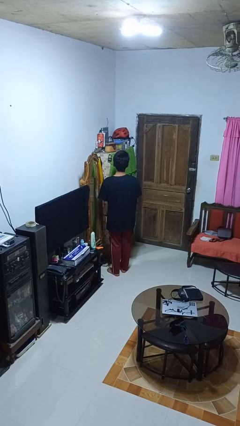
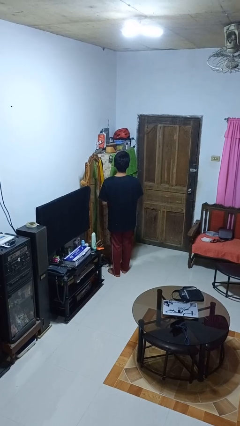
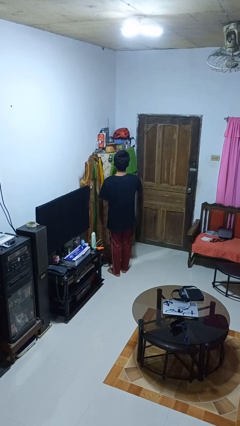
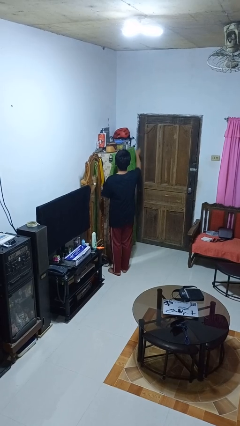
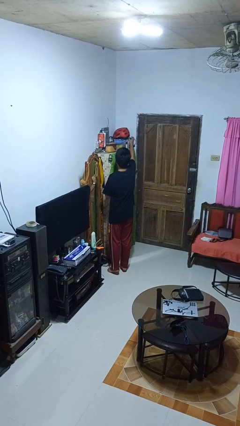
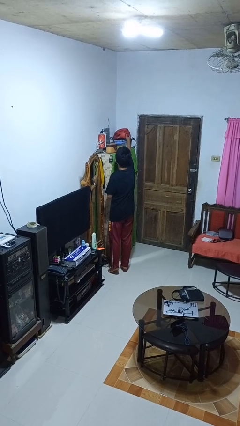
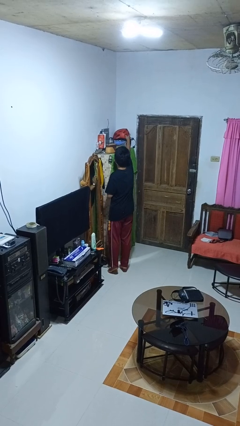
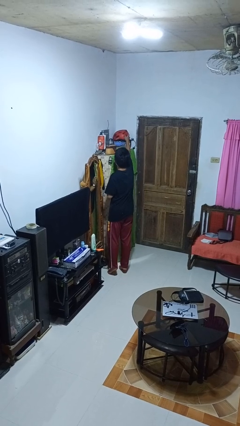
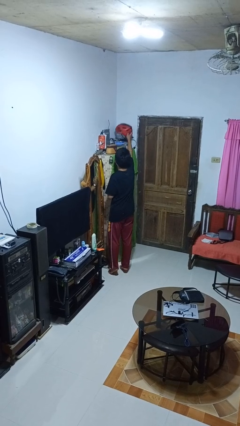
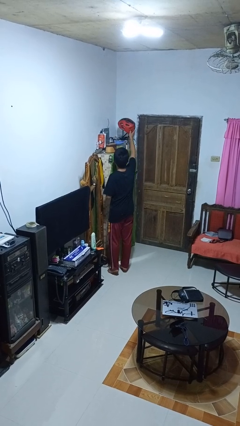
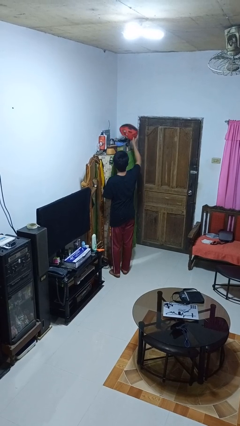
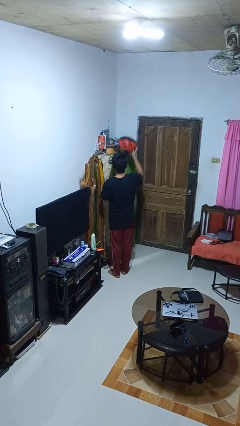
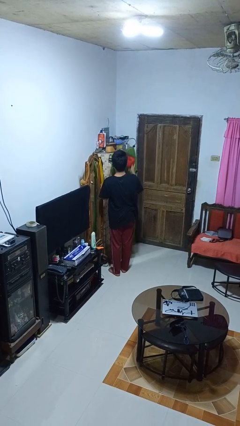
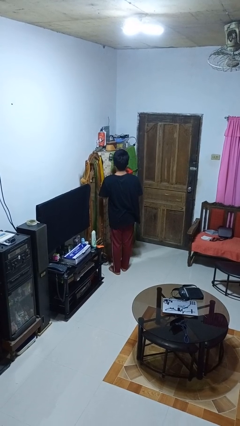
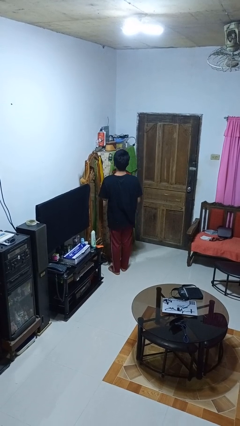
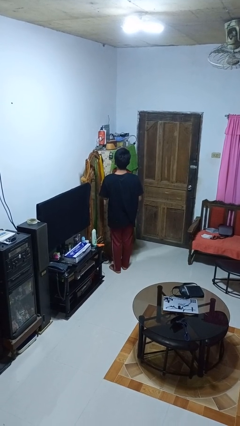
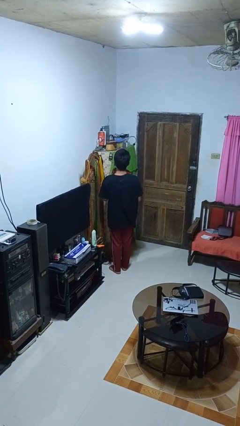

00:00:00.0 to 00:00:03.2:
person picks up object from shelf

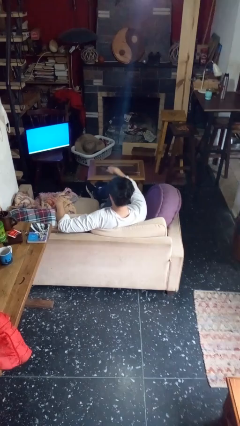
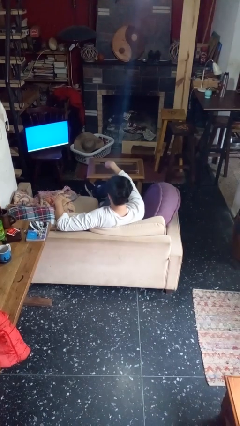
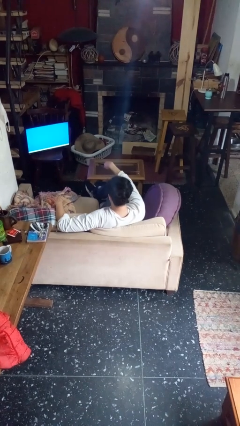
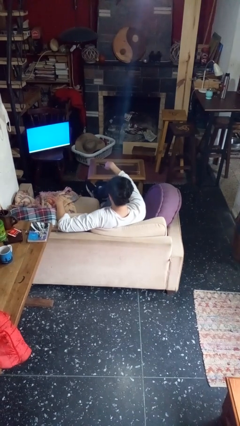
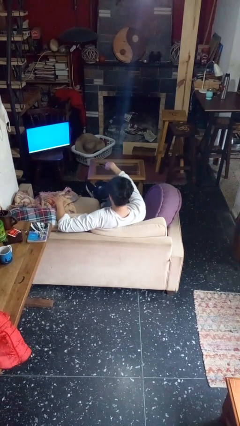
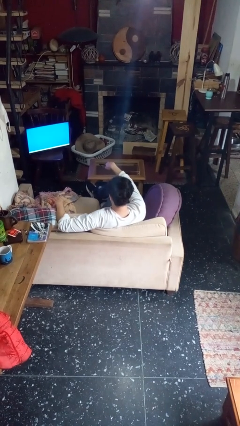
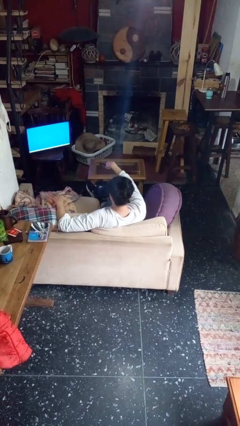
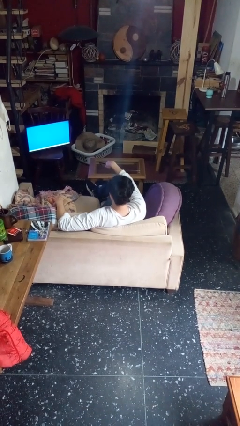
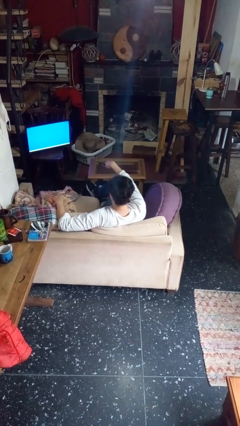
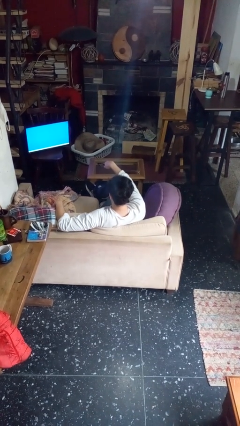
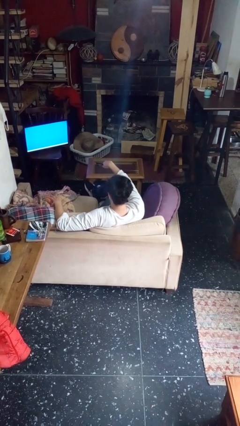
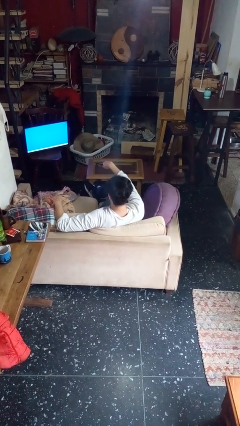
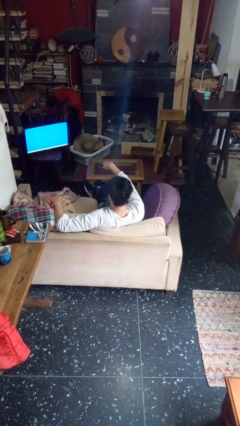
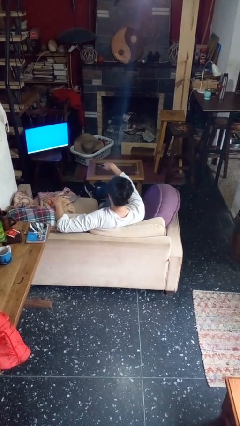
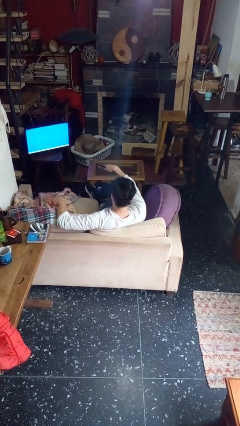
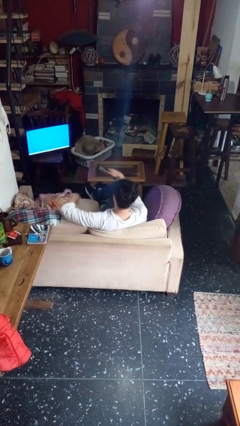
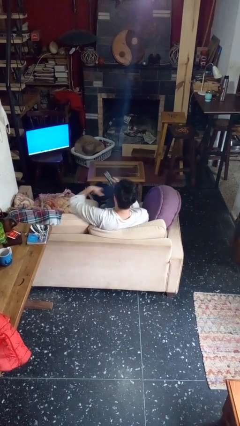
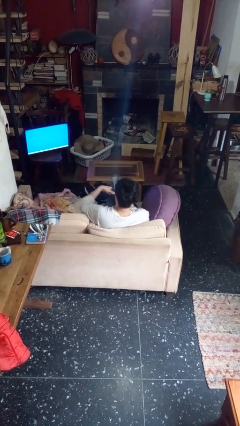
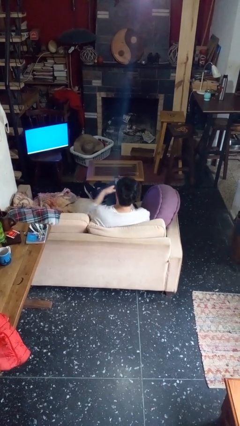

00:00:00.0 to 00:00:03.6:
person uses television remote

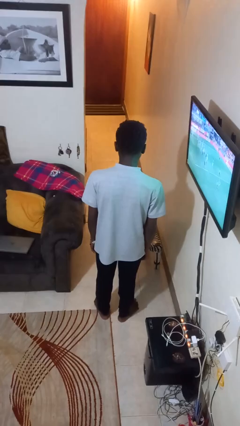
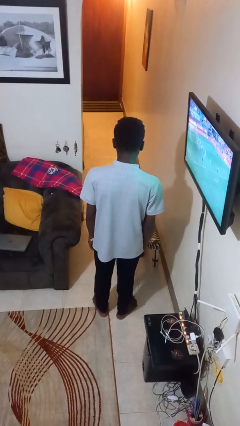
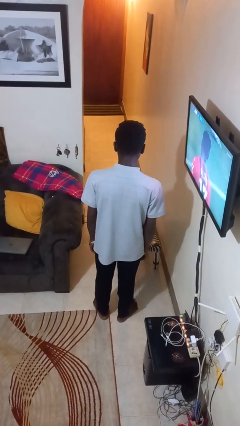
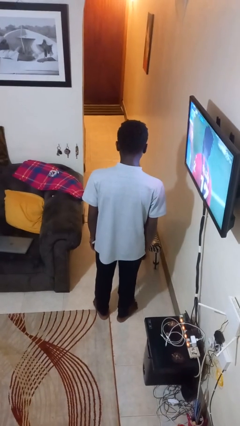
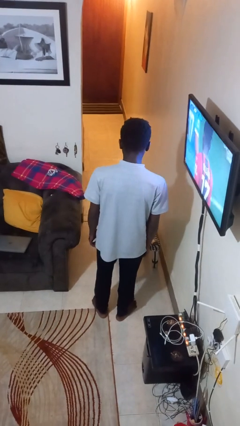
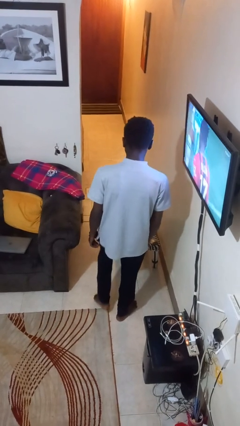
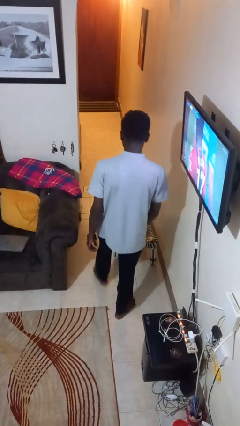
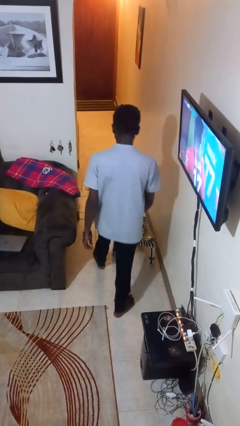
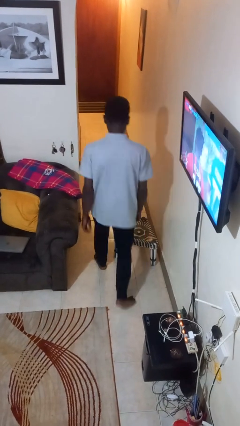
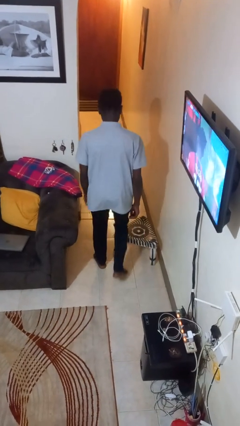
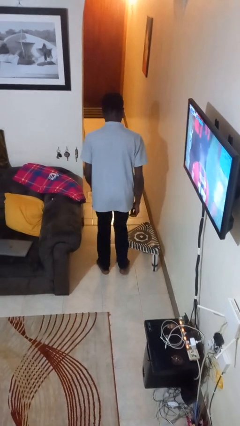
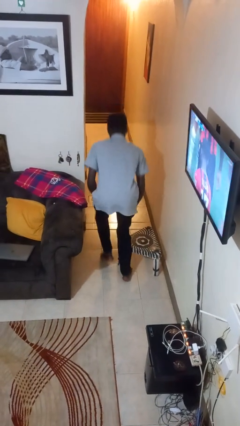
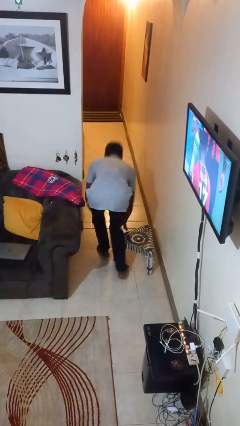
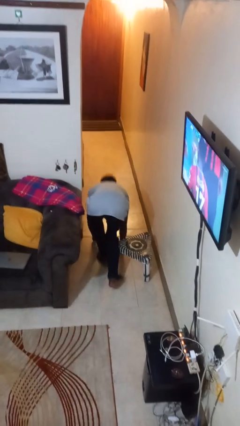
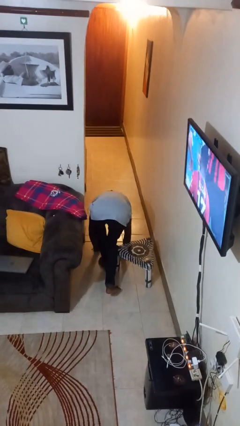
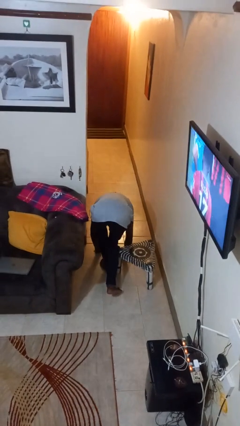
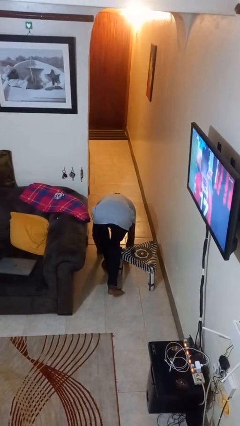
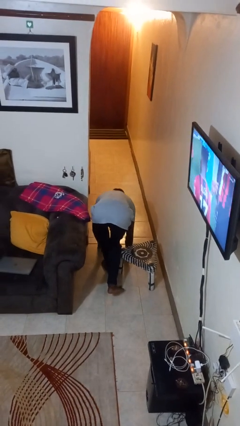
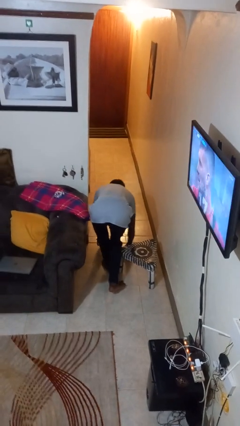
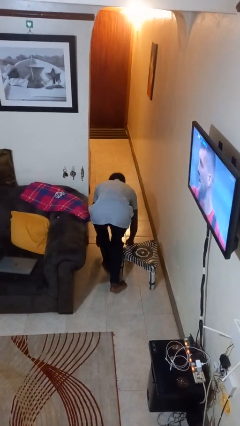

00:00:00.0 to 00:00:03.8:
person trips on object on floor

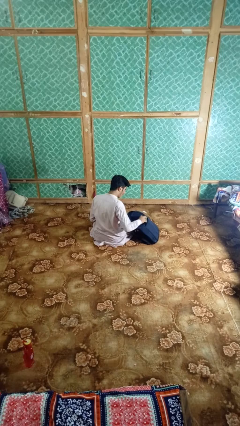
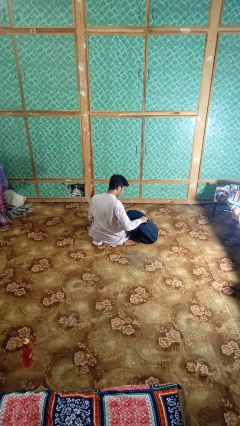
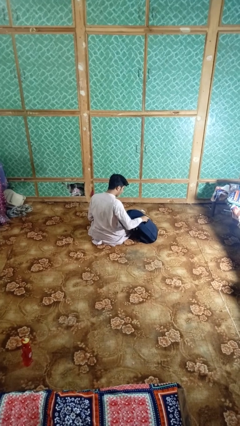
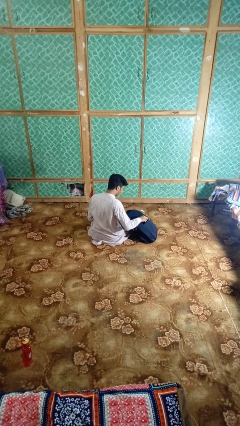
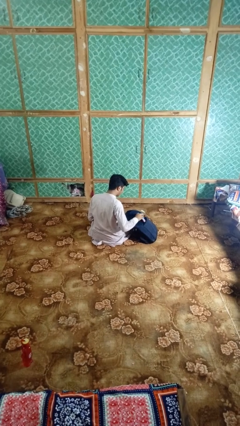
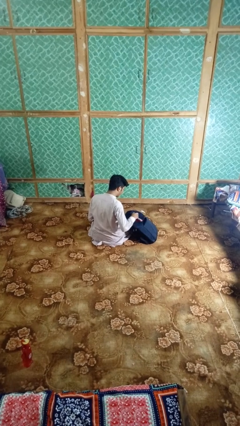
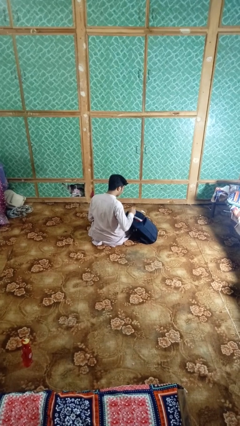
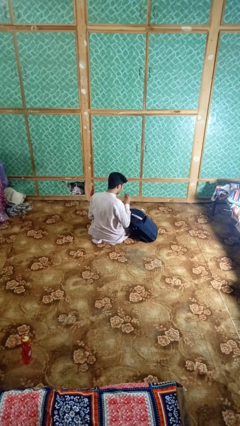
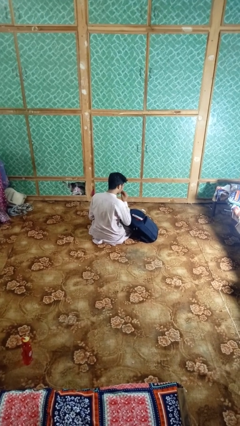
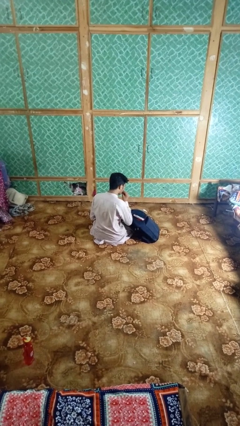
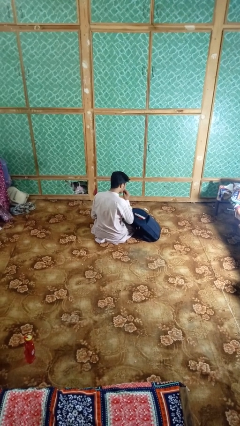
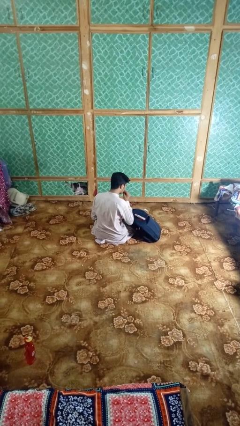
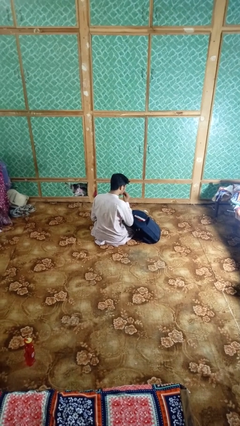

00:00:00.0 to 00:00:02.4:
person eats snack from bag

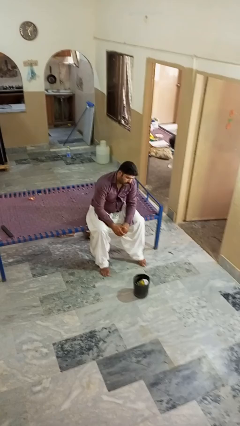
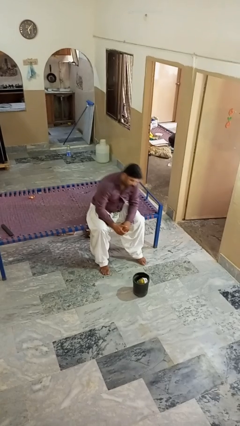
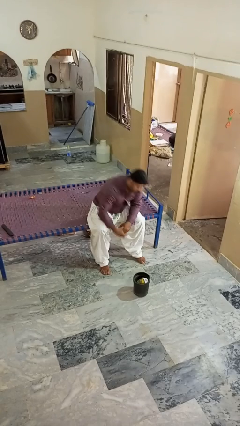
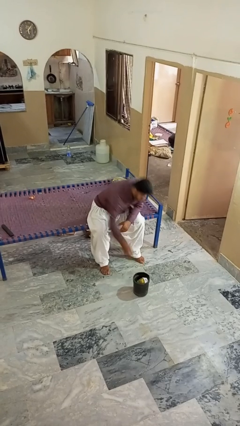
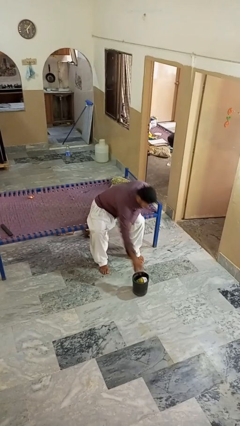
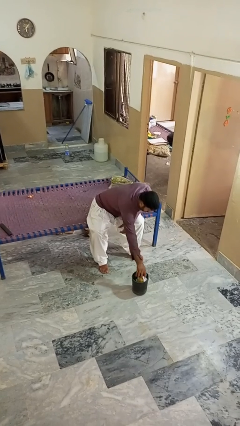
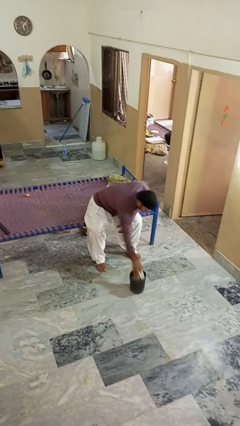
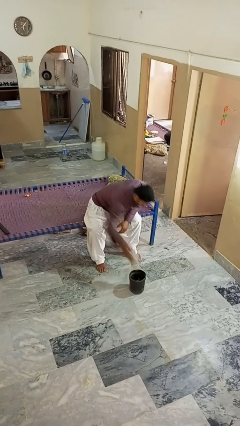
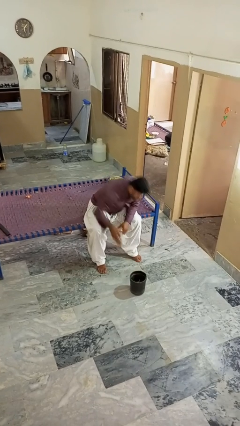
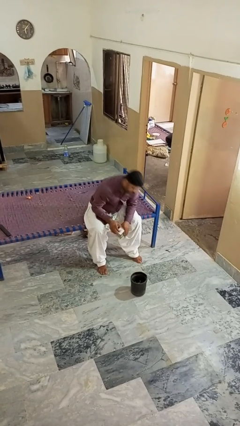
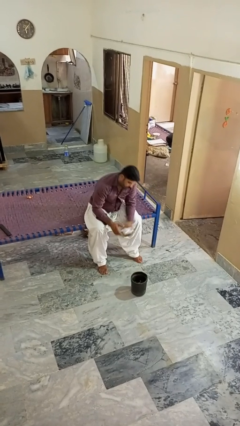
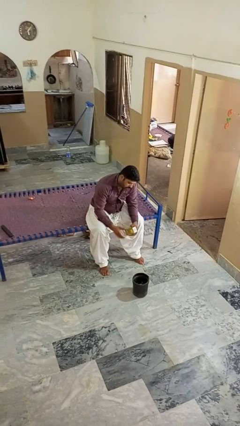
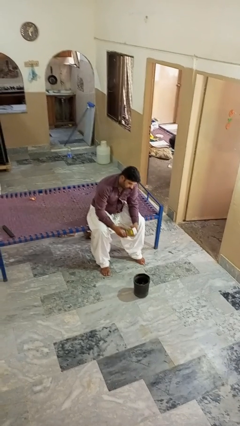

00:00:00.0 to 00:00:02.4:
person takes object from basket

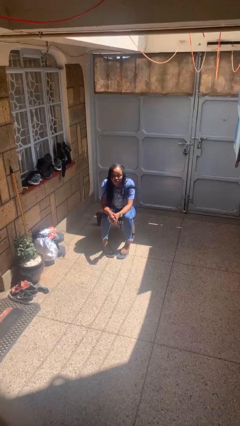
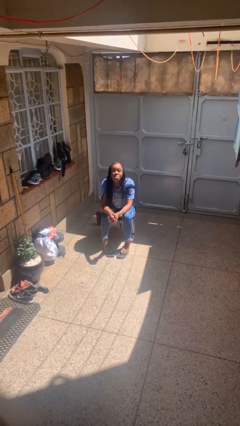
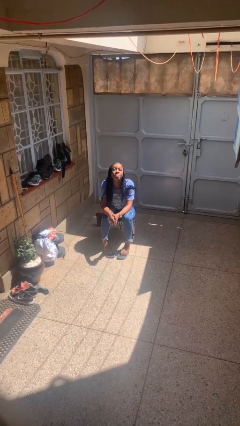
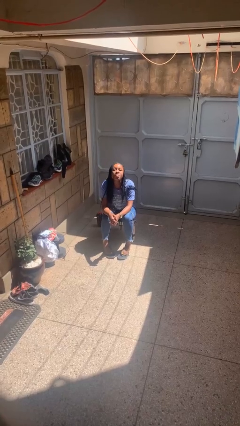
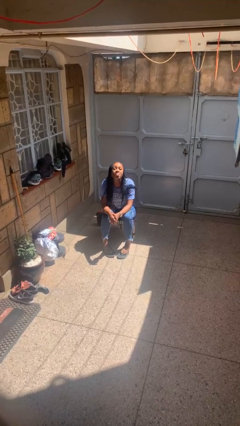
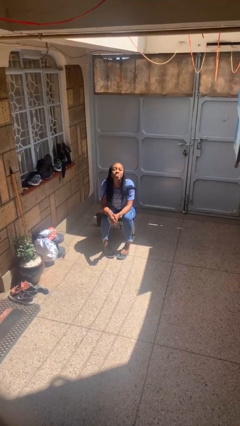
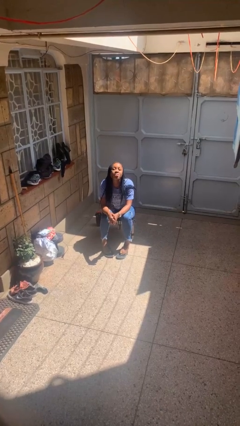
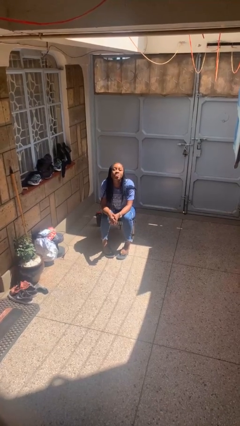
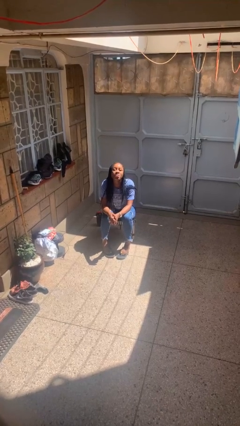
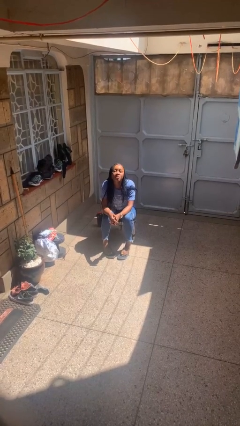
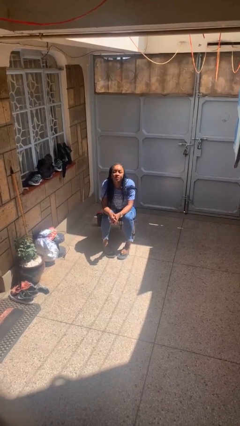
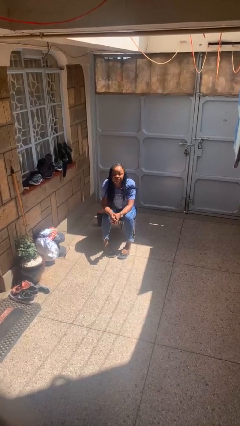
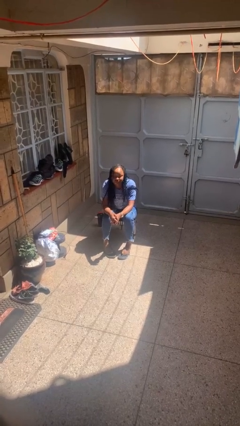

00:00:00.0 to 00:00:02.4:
person sticks out tongue
